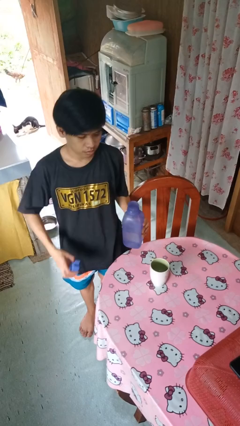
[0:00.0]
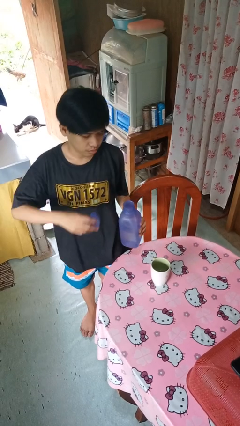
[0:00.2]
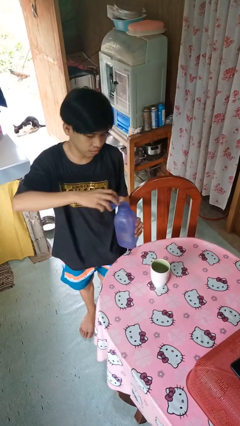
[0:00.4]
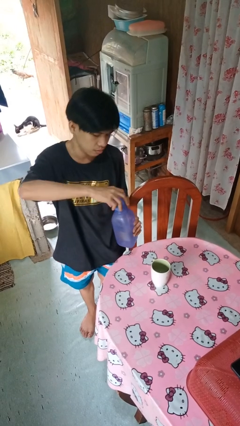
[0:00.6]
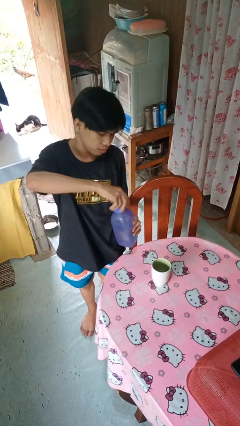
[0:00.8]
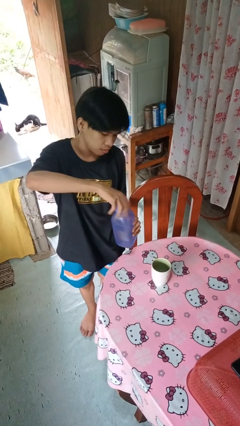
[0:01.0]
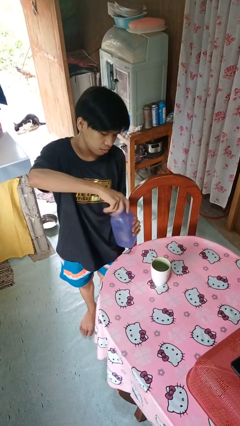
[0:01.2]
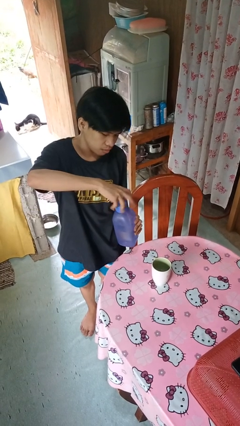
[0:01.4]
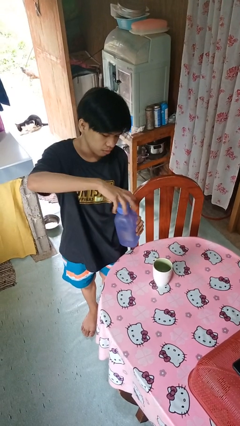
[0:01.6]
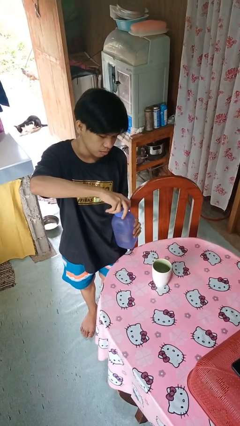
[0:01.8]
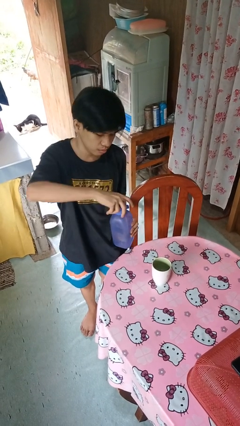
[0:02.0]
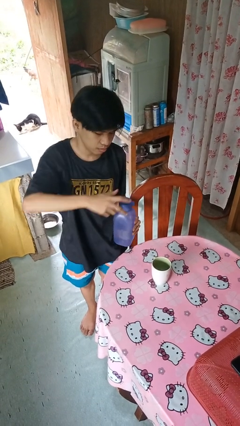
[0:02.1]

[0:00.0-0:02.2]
person screws lid to bottle

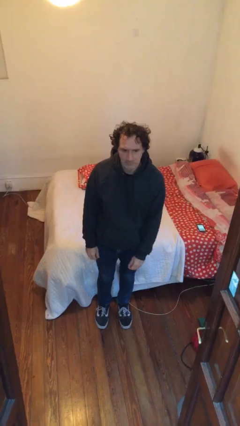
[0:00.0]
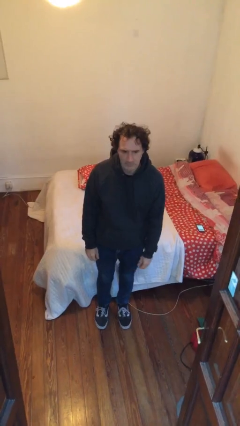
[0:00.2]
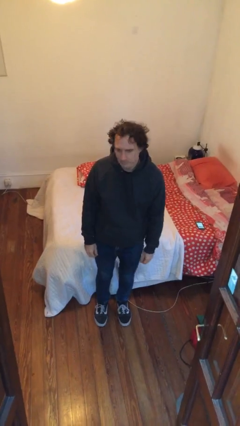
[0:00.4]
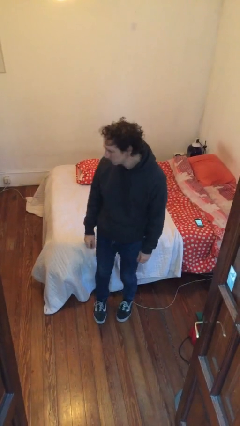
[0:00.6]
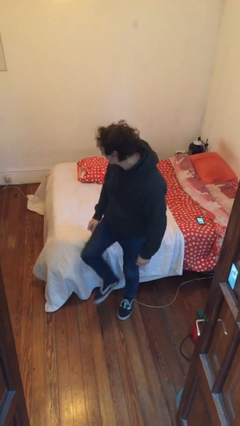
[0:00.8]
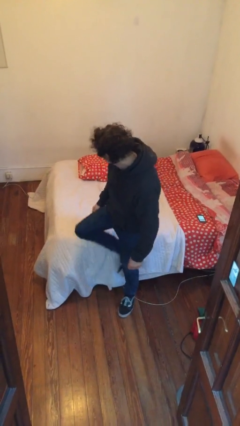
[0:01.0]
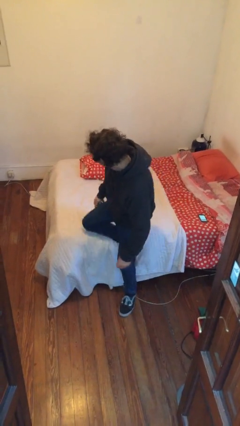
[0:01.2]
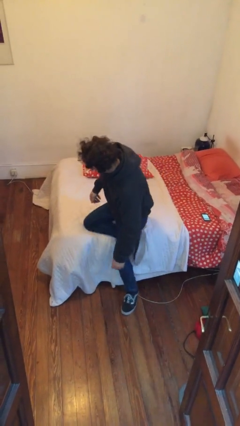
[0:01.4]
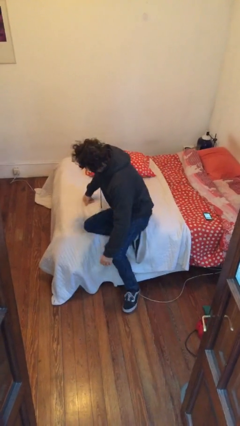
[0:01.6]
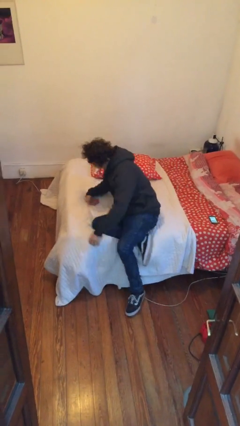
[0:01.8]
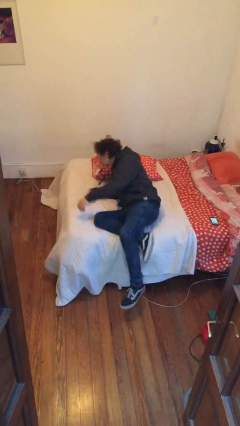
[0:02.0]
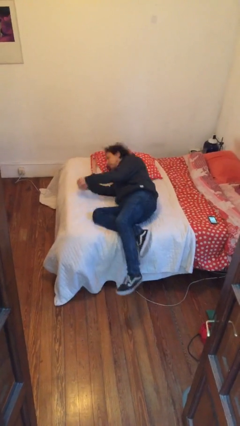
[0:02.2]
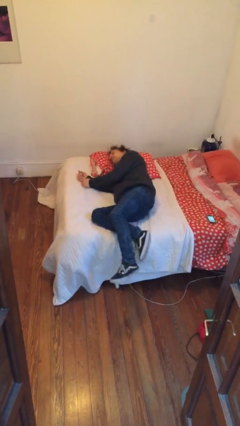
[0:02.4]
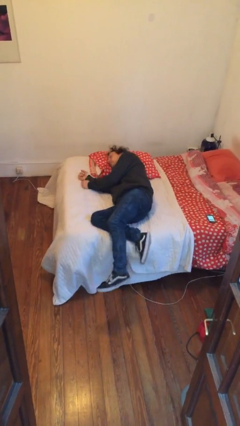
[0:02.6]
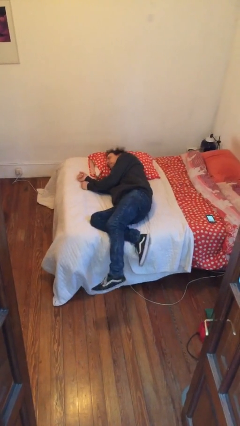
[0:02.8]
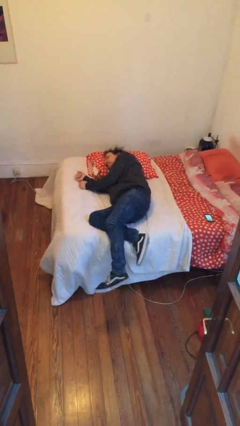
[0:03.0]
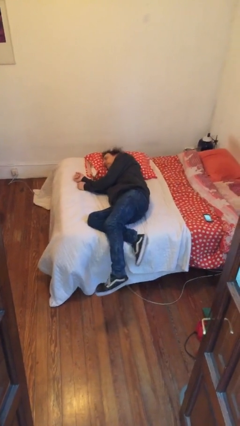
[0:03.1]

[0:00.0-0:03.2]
person lies down on bed

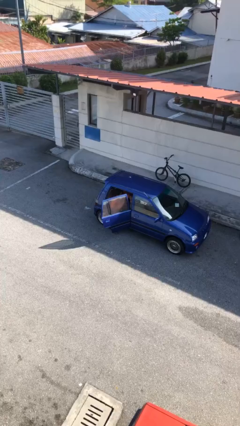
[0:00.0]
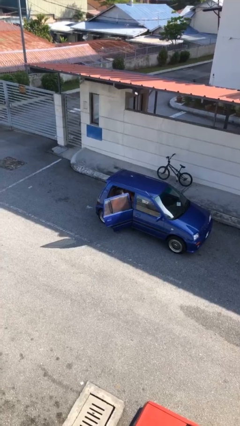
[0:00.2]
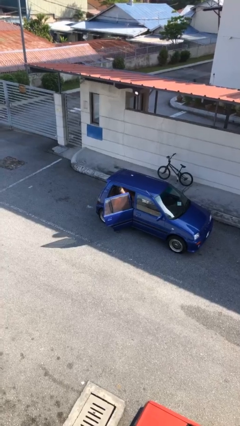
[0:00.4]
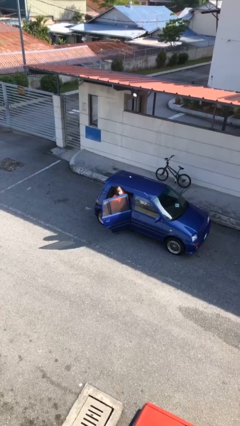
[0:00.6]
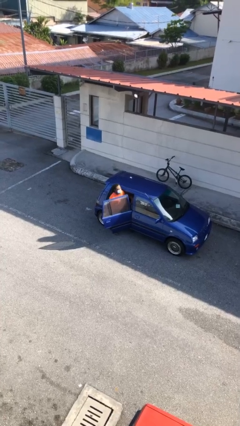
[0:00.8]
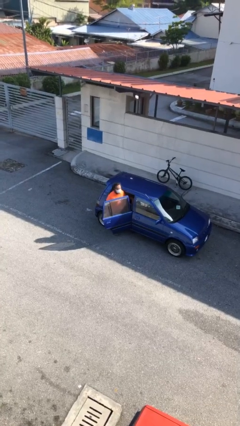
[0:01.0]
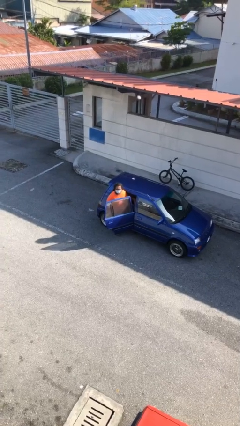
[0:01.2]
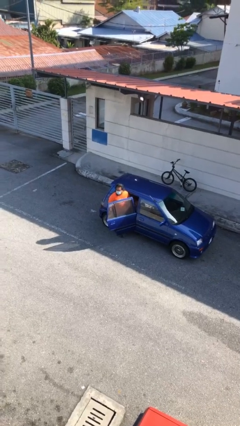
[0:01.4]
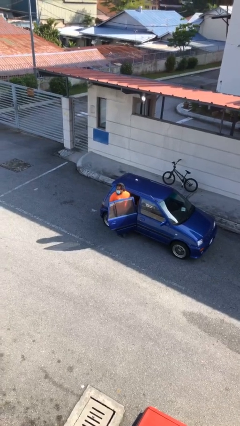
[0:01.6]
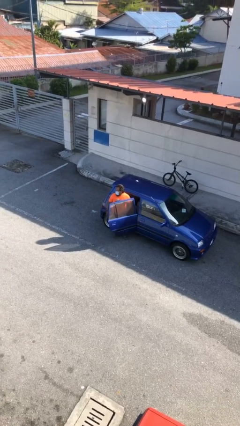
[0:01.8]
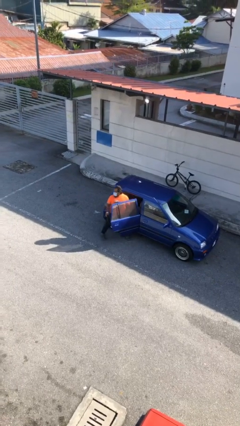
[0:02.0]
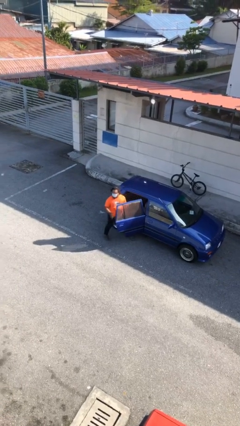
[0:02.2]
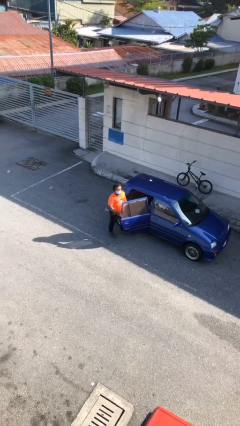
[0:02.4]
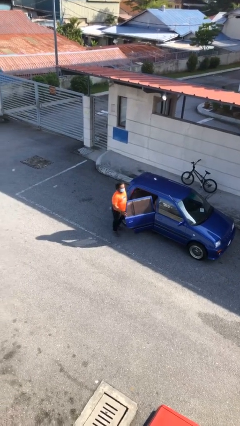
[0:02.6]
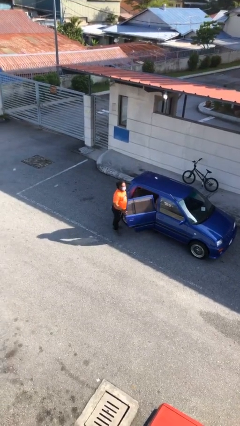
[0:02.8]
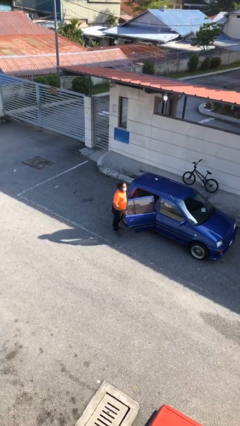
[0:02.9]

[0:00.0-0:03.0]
person exits car

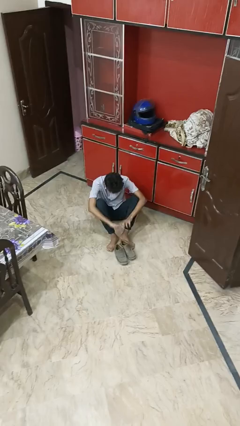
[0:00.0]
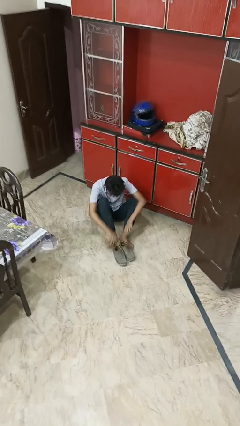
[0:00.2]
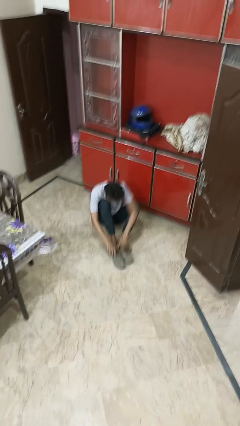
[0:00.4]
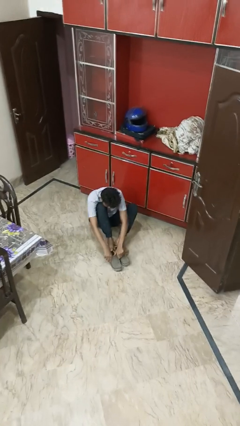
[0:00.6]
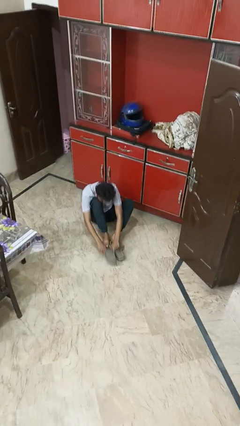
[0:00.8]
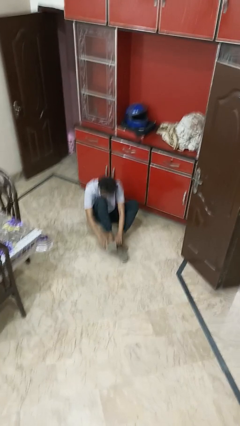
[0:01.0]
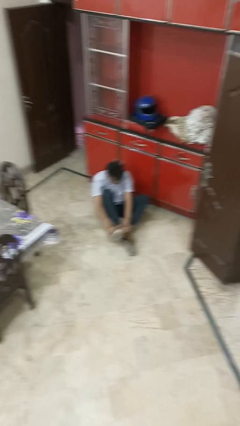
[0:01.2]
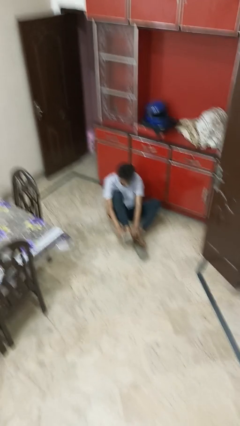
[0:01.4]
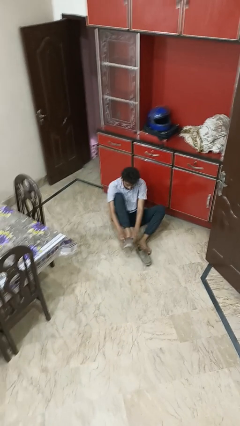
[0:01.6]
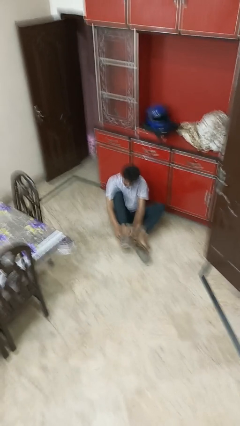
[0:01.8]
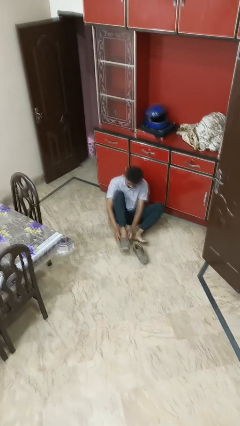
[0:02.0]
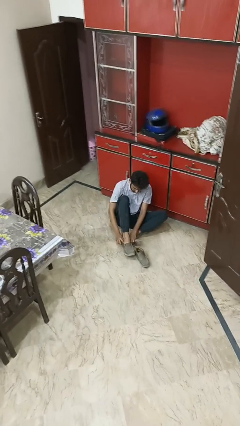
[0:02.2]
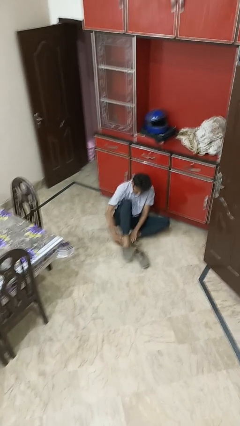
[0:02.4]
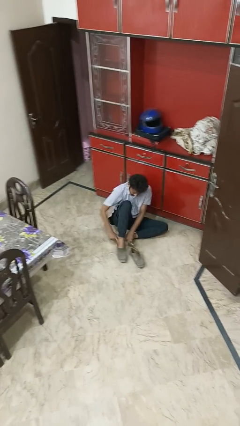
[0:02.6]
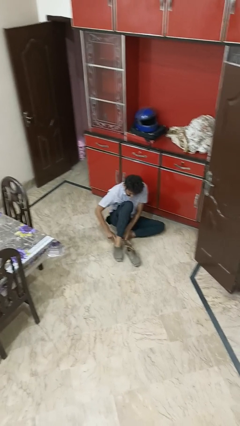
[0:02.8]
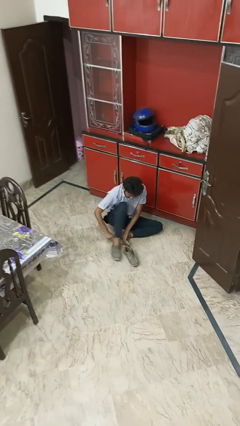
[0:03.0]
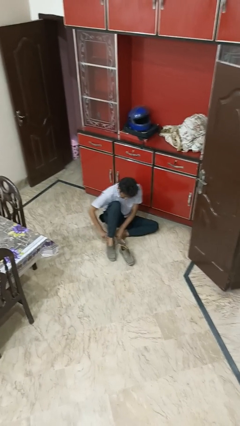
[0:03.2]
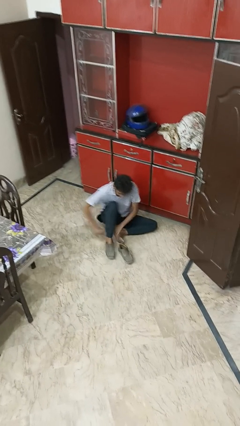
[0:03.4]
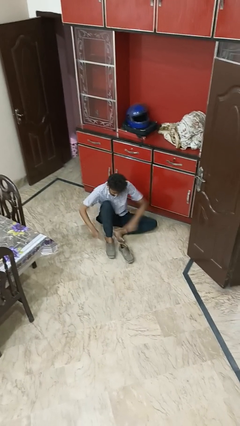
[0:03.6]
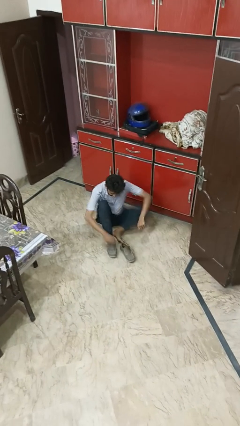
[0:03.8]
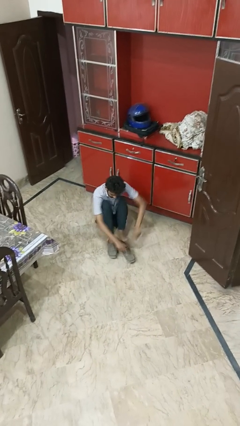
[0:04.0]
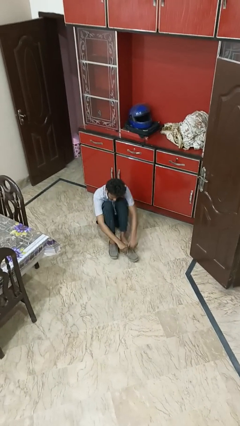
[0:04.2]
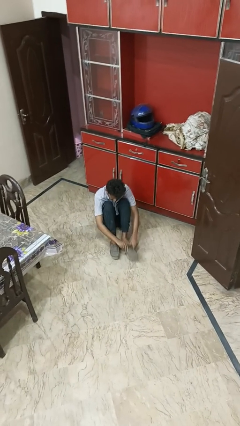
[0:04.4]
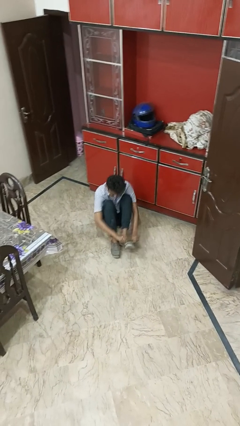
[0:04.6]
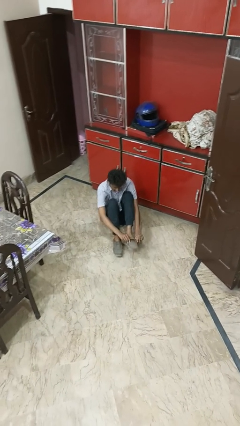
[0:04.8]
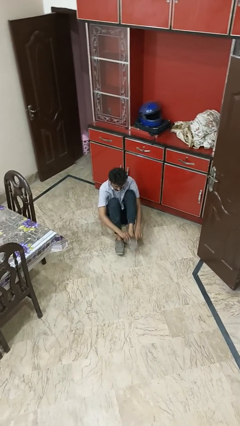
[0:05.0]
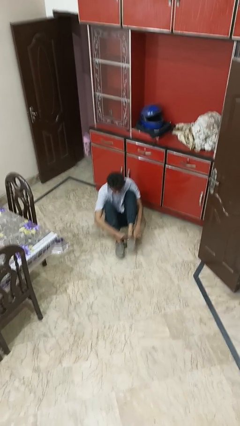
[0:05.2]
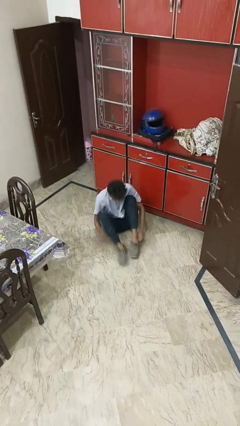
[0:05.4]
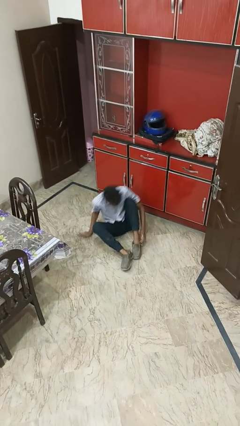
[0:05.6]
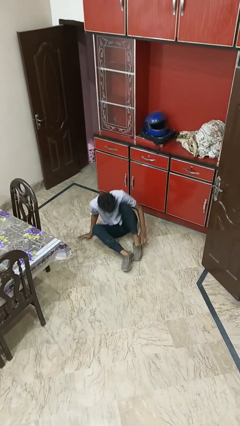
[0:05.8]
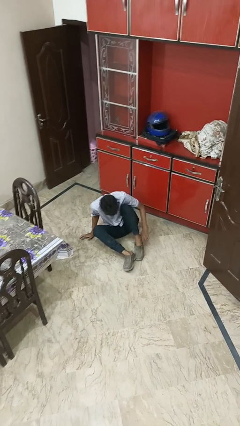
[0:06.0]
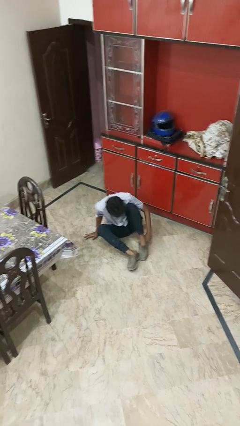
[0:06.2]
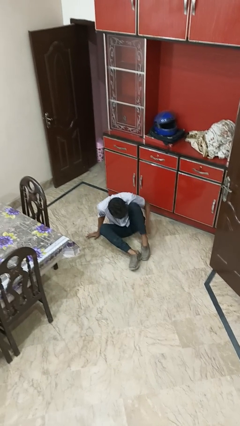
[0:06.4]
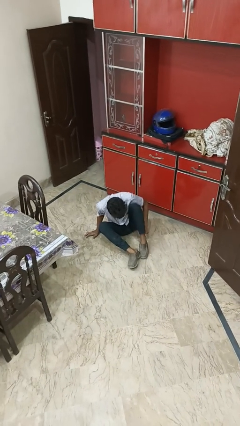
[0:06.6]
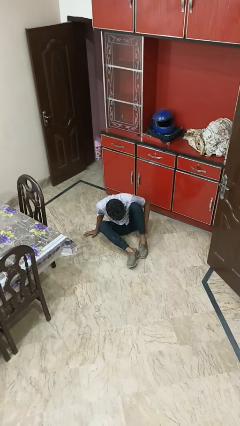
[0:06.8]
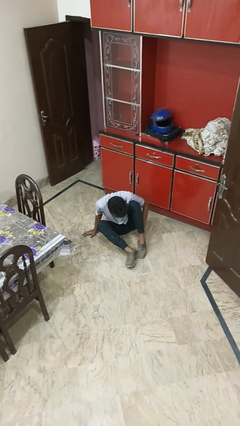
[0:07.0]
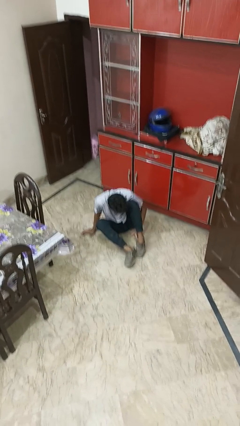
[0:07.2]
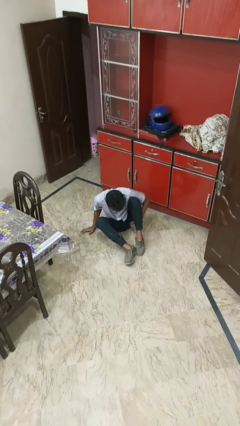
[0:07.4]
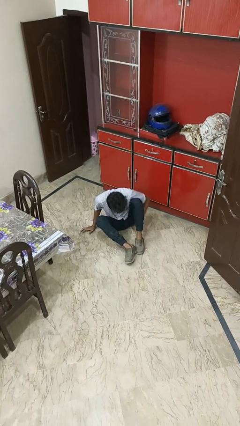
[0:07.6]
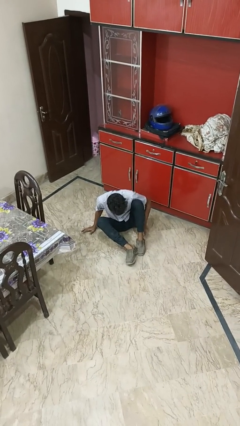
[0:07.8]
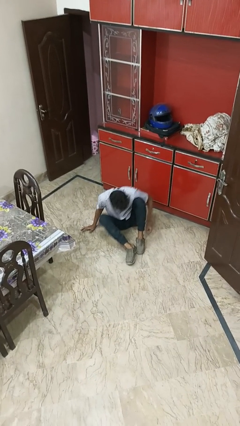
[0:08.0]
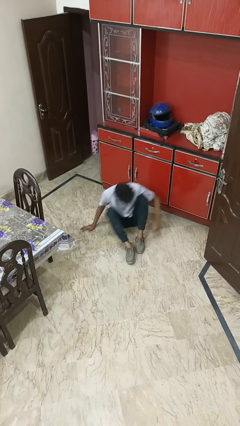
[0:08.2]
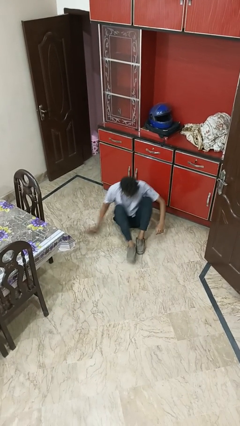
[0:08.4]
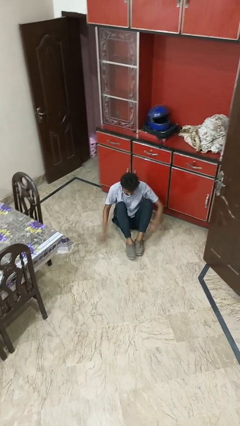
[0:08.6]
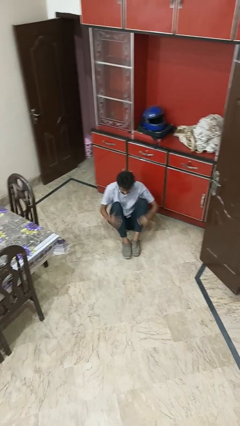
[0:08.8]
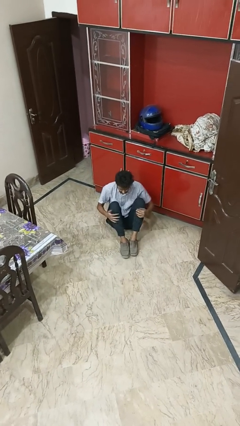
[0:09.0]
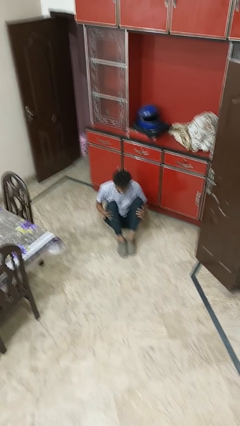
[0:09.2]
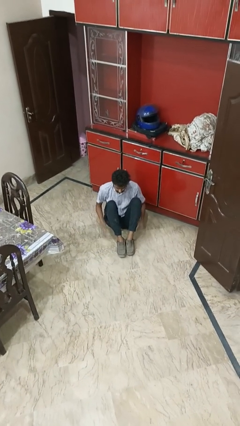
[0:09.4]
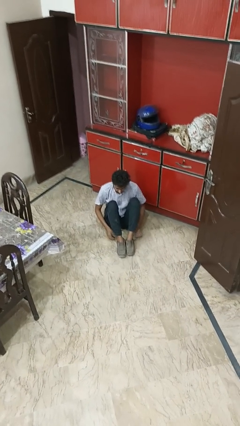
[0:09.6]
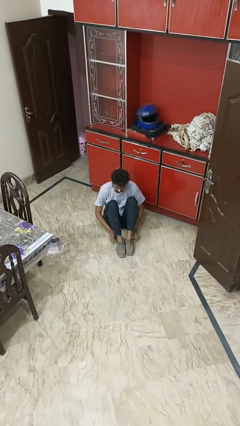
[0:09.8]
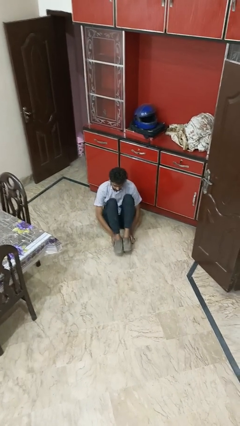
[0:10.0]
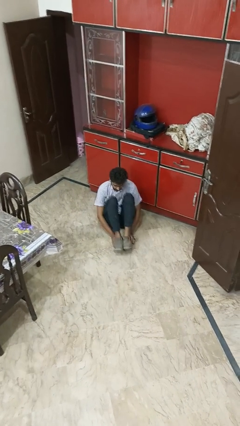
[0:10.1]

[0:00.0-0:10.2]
person puts on boots
